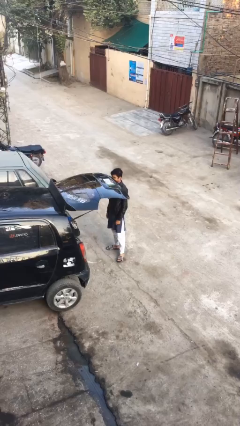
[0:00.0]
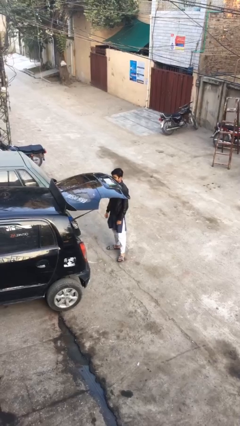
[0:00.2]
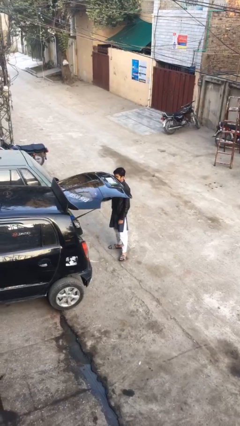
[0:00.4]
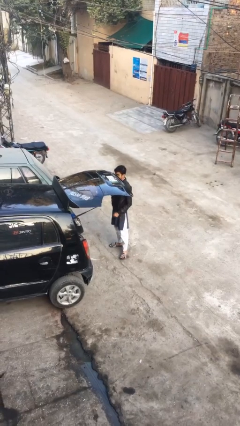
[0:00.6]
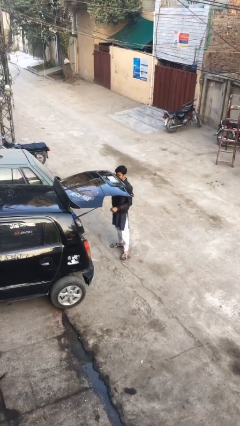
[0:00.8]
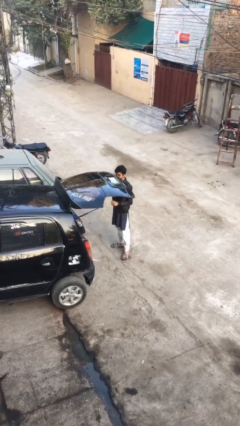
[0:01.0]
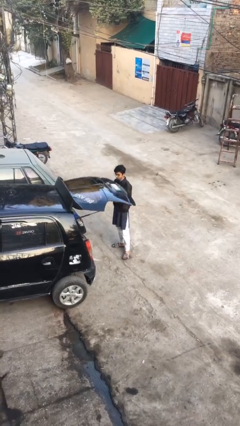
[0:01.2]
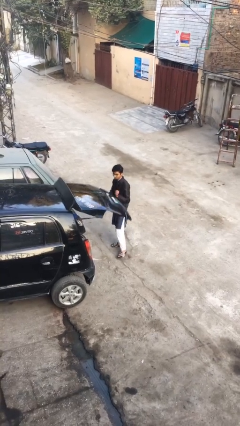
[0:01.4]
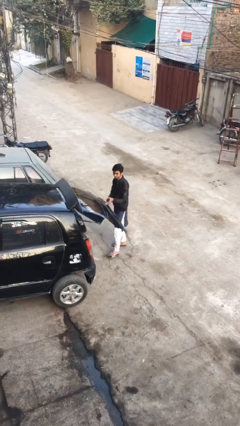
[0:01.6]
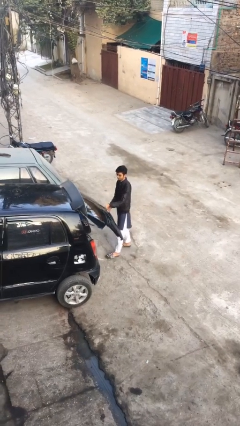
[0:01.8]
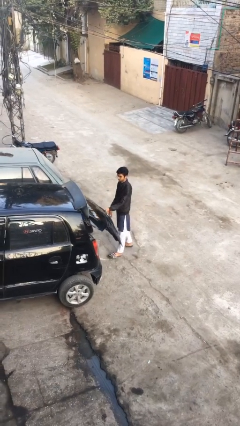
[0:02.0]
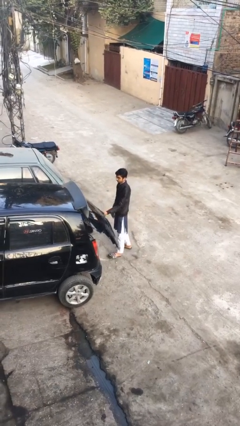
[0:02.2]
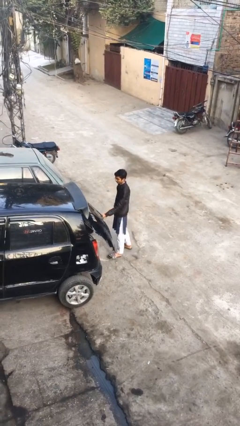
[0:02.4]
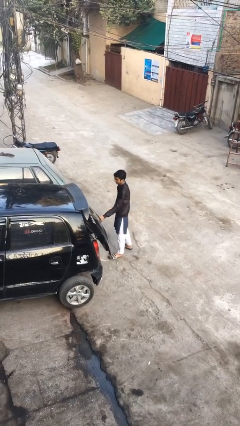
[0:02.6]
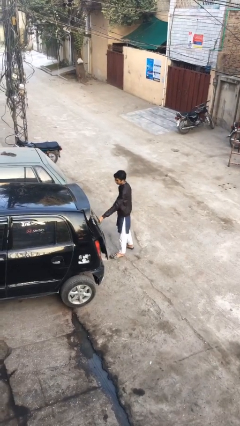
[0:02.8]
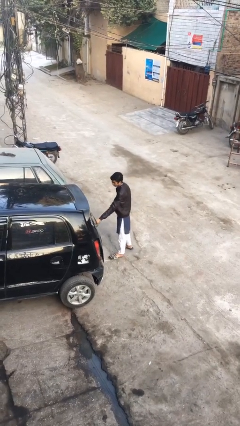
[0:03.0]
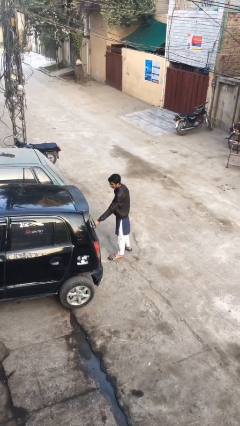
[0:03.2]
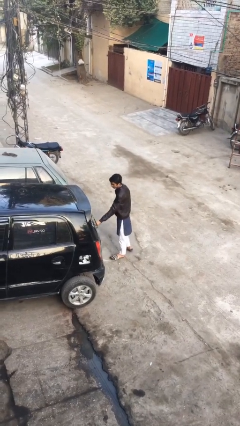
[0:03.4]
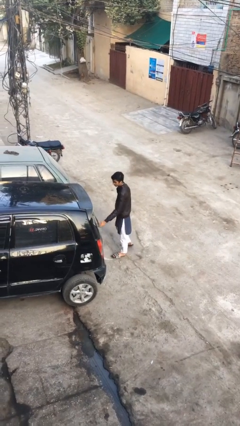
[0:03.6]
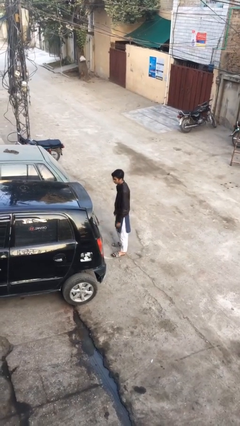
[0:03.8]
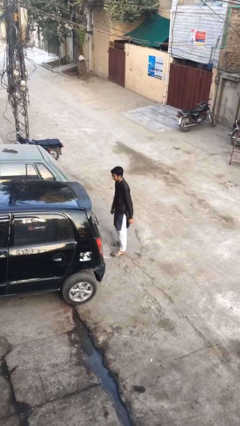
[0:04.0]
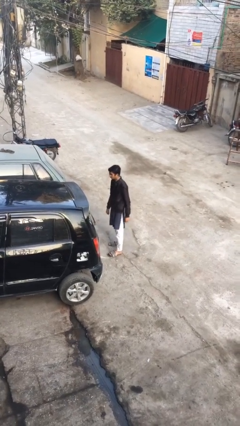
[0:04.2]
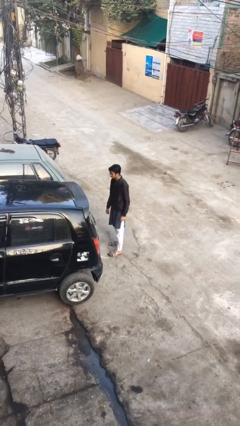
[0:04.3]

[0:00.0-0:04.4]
person closes car trunk

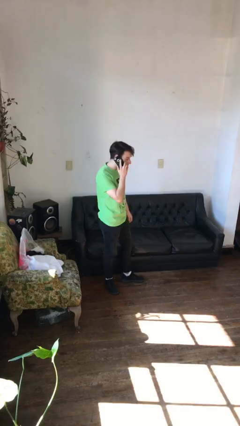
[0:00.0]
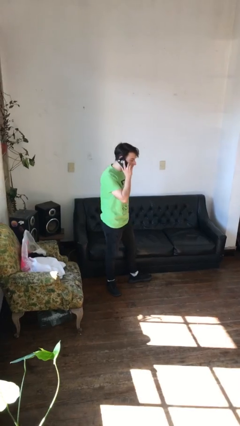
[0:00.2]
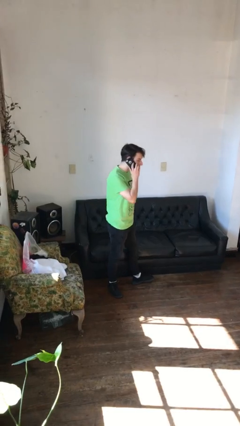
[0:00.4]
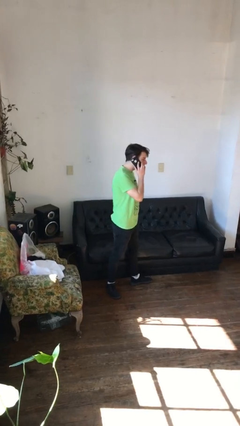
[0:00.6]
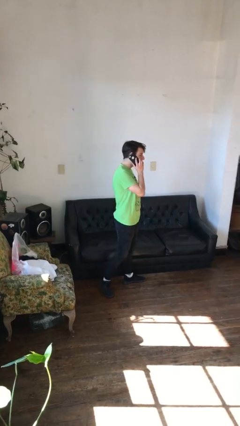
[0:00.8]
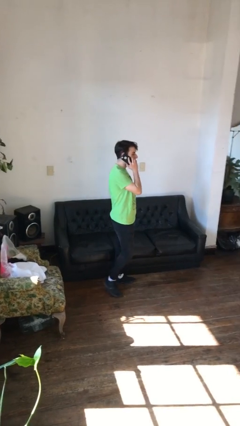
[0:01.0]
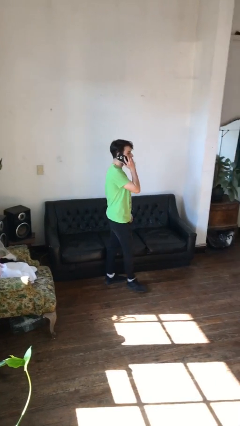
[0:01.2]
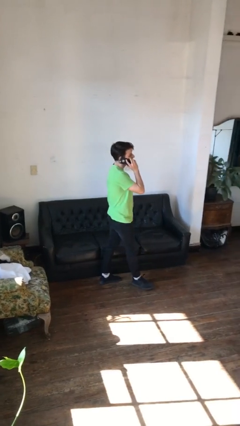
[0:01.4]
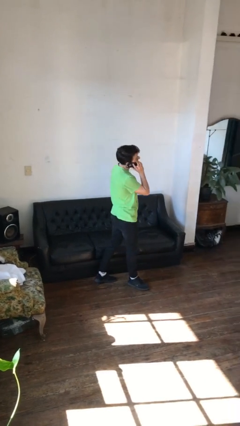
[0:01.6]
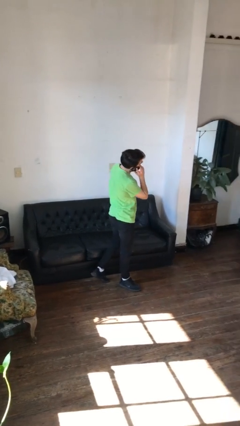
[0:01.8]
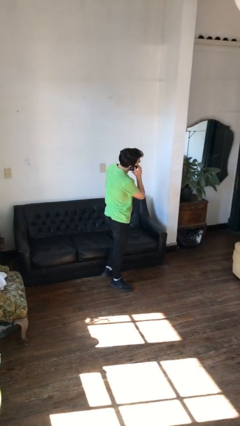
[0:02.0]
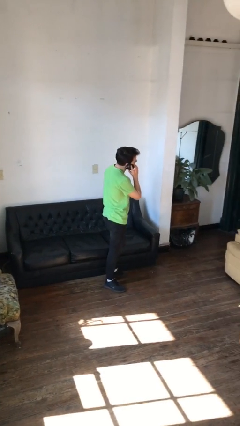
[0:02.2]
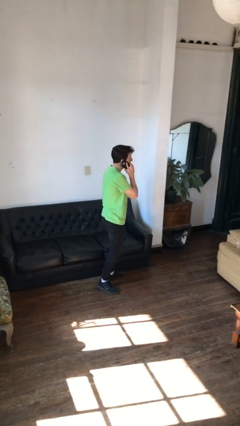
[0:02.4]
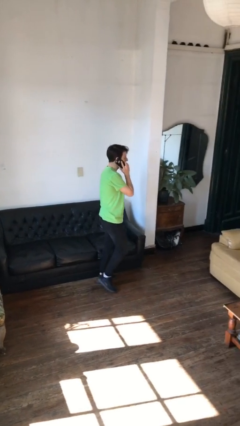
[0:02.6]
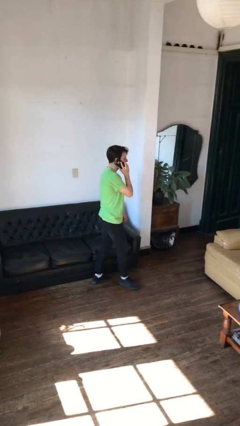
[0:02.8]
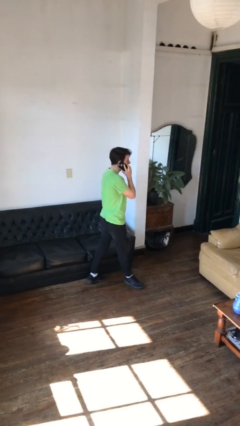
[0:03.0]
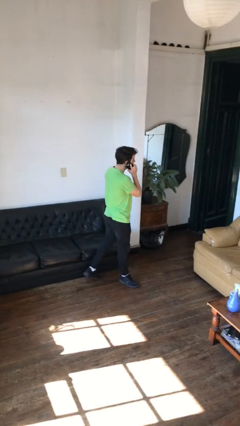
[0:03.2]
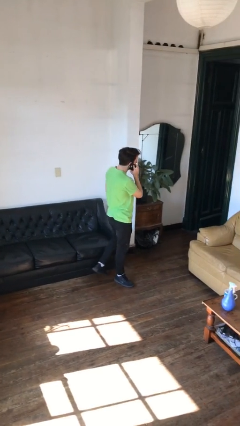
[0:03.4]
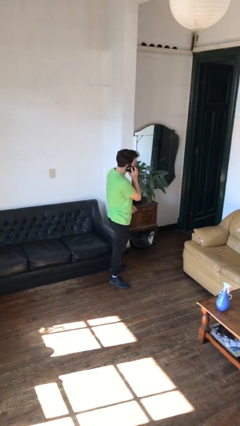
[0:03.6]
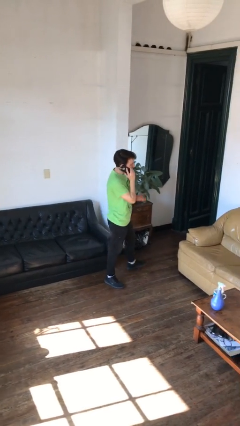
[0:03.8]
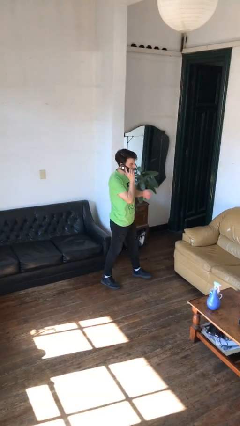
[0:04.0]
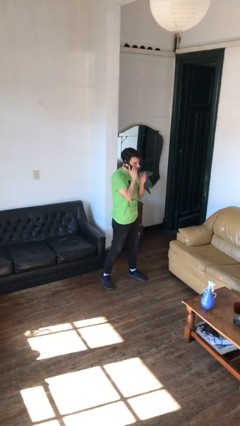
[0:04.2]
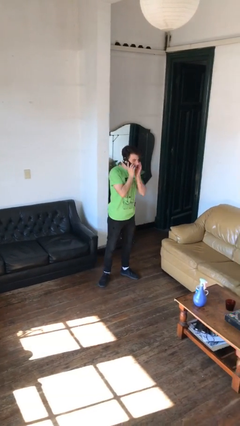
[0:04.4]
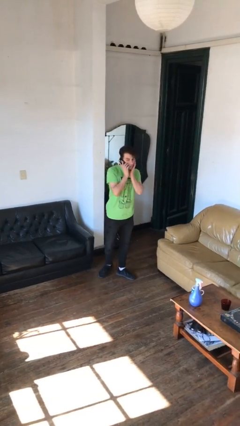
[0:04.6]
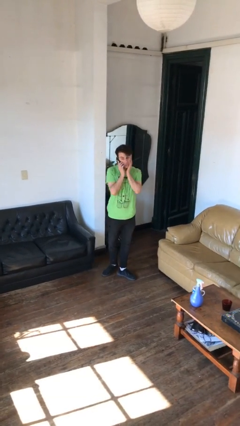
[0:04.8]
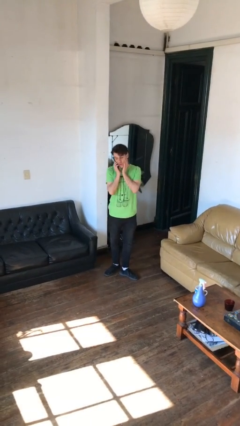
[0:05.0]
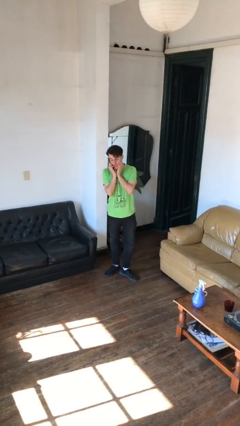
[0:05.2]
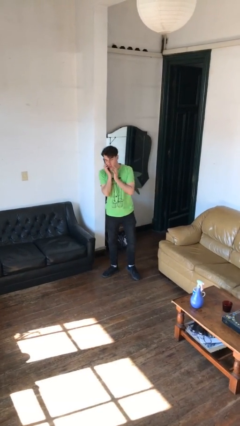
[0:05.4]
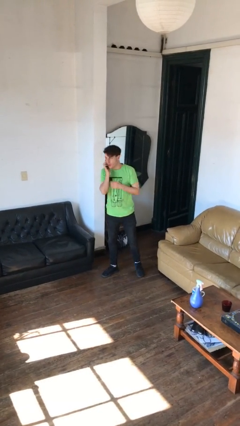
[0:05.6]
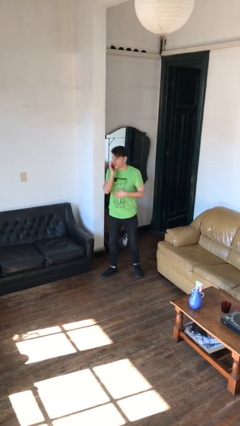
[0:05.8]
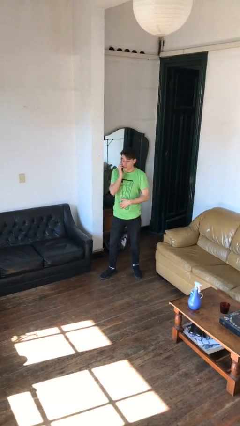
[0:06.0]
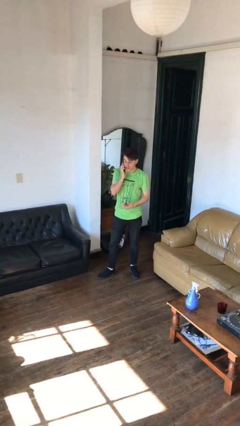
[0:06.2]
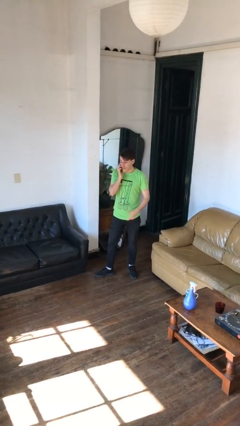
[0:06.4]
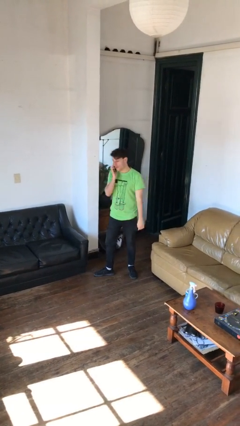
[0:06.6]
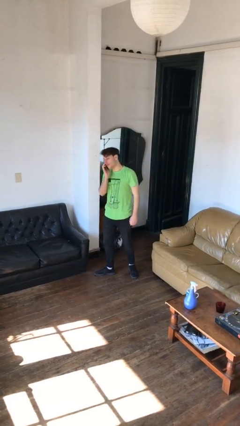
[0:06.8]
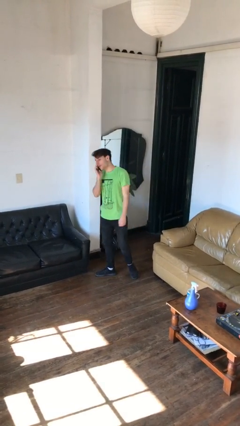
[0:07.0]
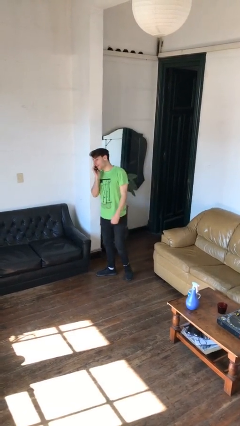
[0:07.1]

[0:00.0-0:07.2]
person talks on phone

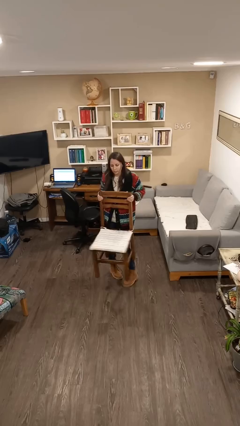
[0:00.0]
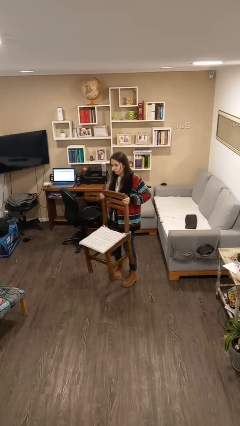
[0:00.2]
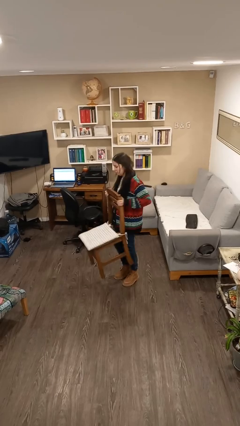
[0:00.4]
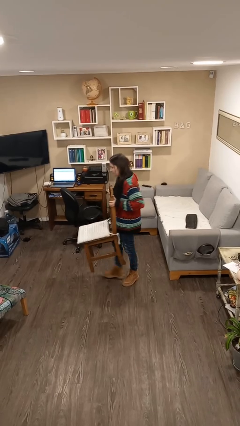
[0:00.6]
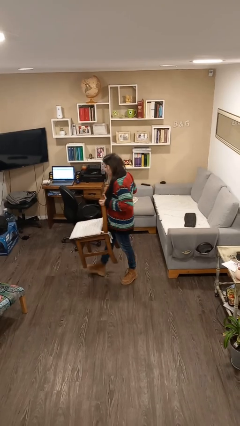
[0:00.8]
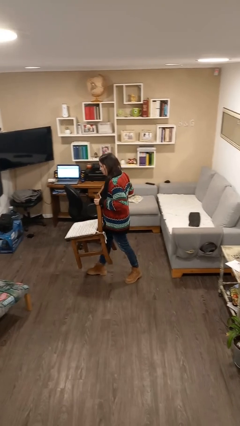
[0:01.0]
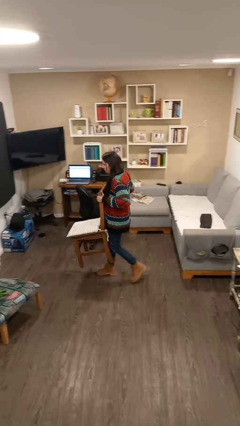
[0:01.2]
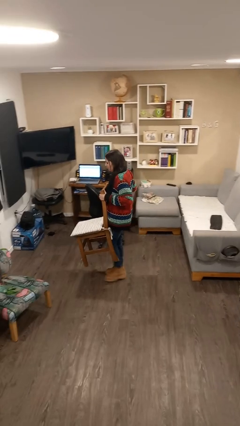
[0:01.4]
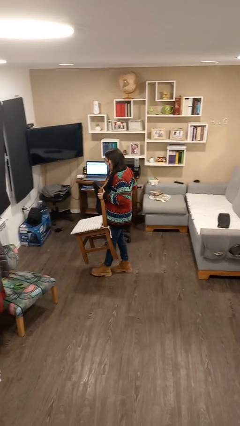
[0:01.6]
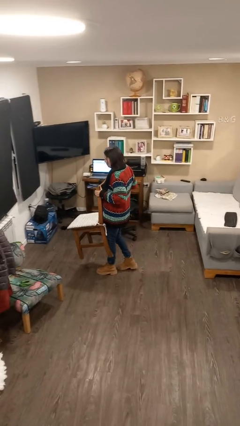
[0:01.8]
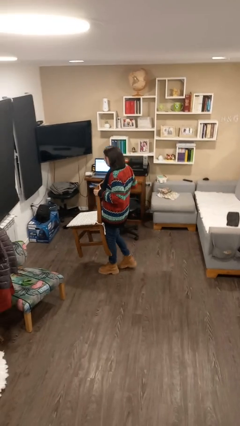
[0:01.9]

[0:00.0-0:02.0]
person carries furniture

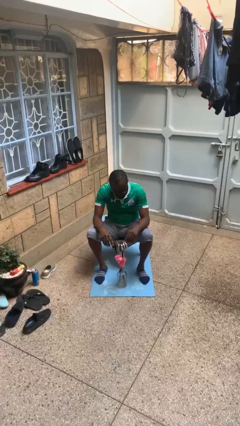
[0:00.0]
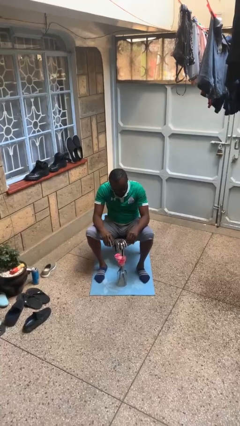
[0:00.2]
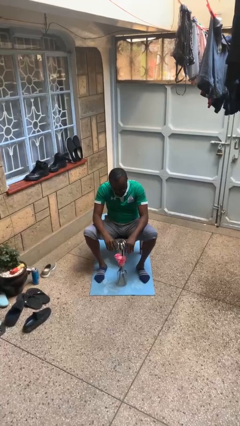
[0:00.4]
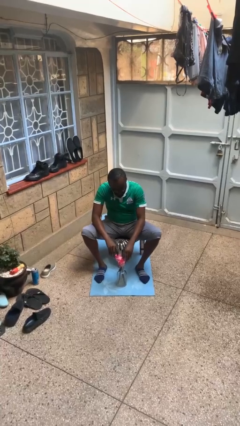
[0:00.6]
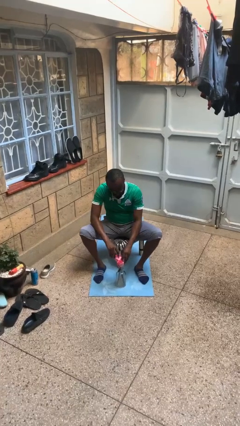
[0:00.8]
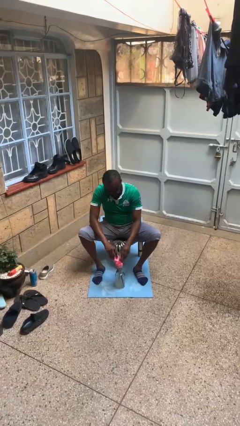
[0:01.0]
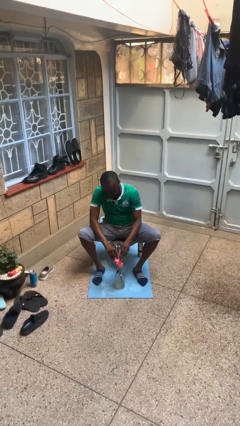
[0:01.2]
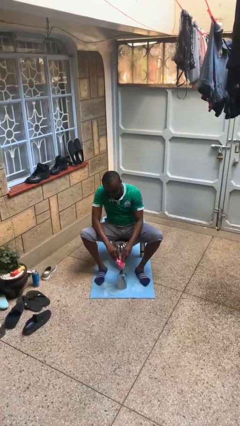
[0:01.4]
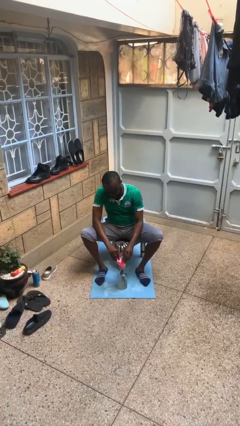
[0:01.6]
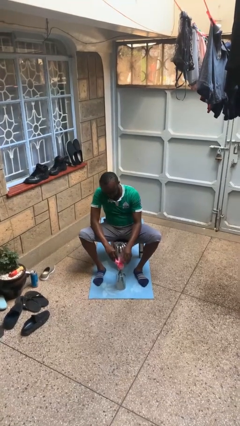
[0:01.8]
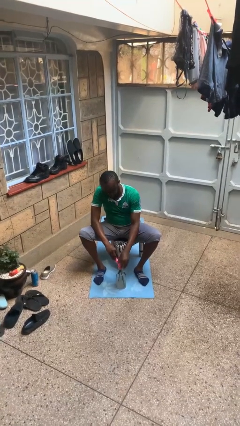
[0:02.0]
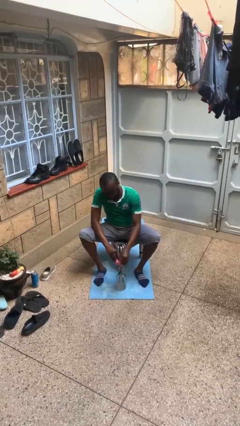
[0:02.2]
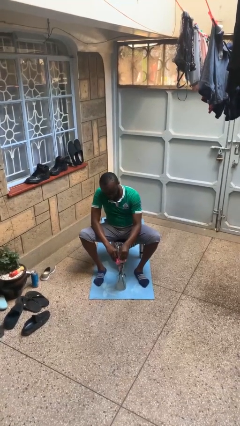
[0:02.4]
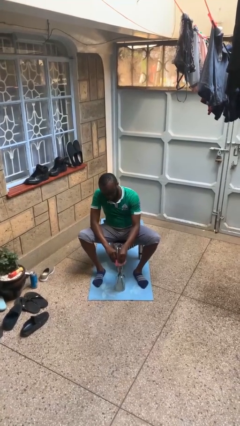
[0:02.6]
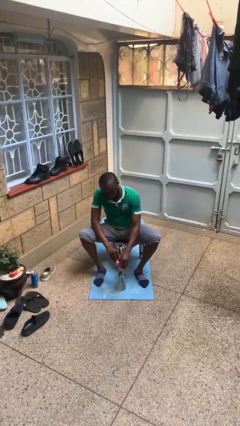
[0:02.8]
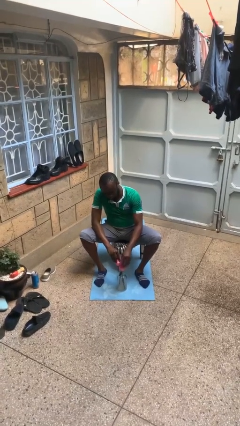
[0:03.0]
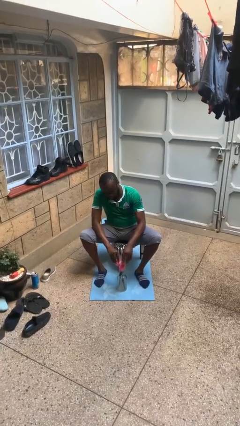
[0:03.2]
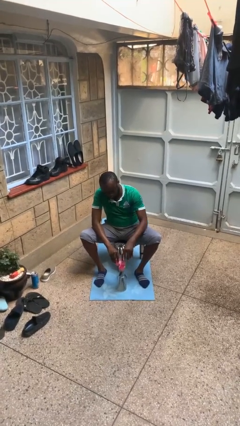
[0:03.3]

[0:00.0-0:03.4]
person arranges flowers in vase

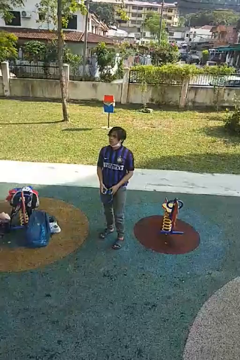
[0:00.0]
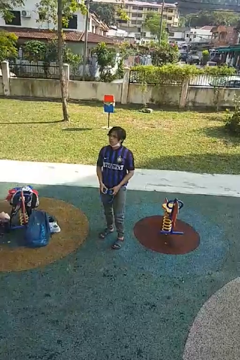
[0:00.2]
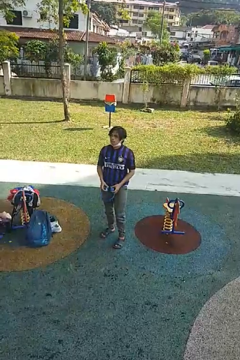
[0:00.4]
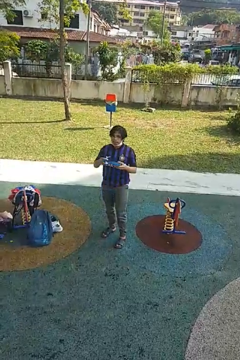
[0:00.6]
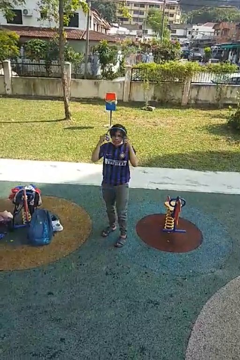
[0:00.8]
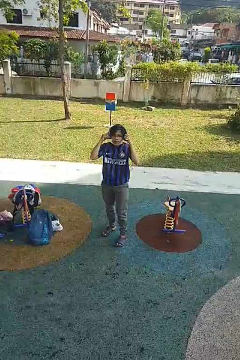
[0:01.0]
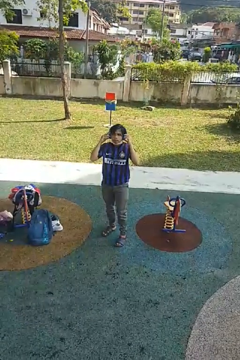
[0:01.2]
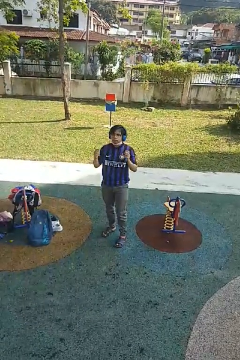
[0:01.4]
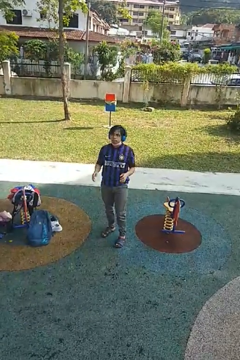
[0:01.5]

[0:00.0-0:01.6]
person puts on headphones
